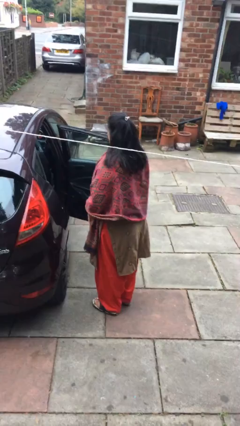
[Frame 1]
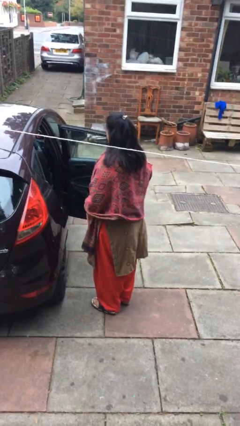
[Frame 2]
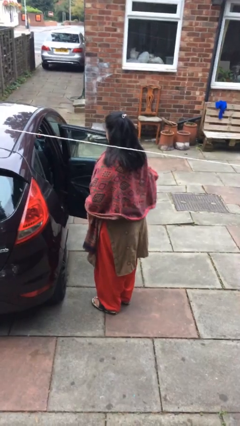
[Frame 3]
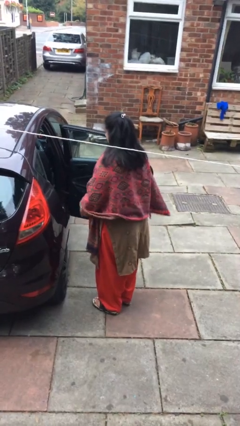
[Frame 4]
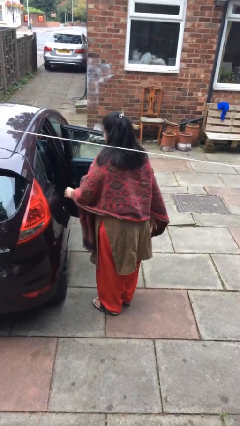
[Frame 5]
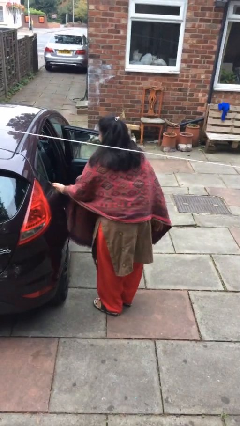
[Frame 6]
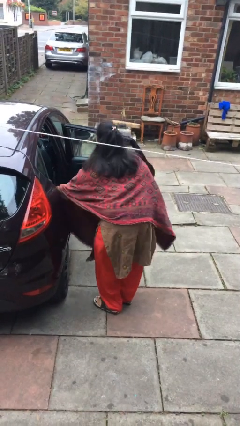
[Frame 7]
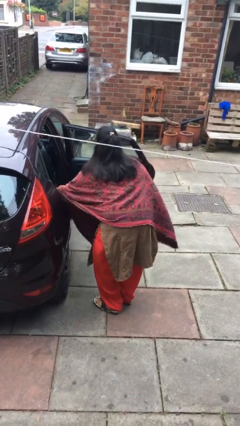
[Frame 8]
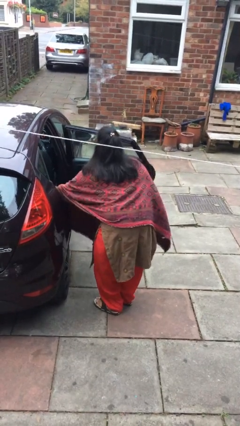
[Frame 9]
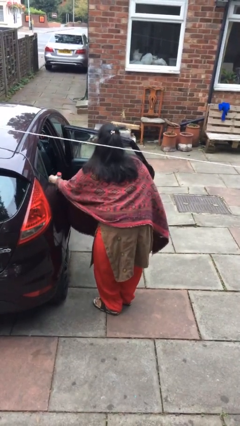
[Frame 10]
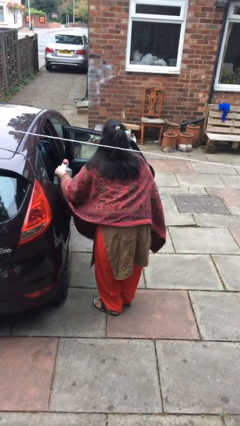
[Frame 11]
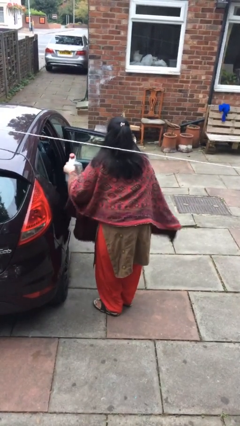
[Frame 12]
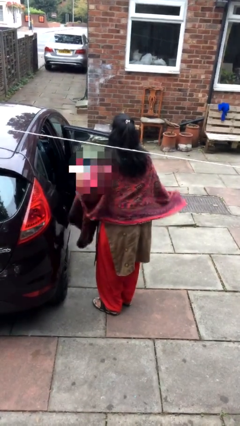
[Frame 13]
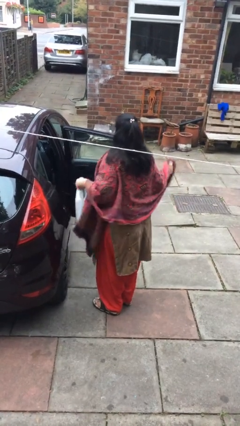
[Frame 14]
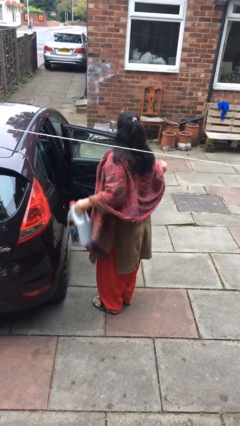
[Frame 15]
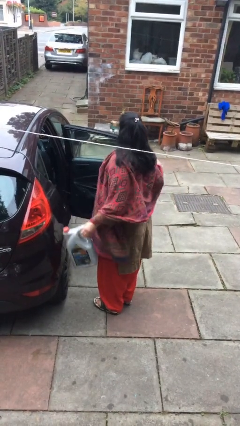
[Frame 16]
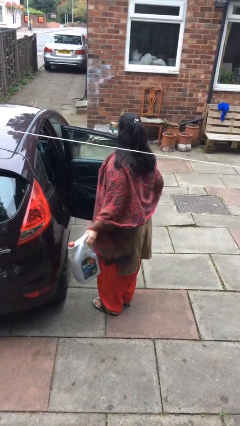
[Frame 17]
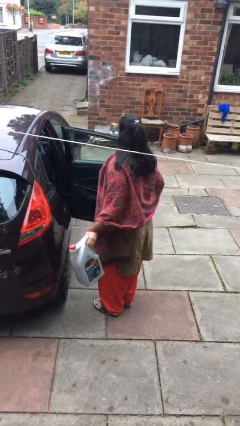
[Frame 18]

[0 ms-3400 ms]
person unloads car

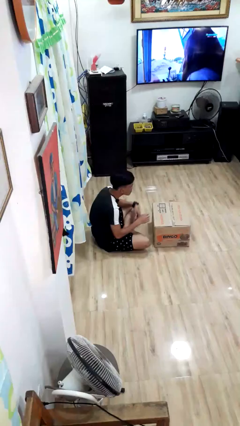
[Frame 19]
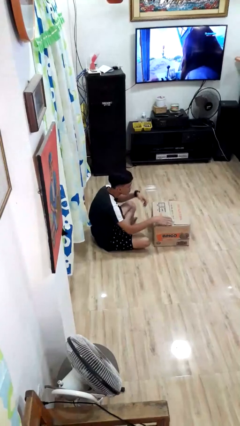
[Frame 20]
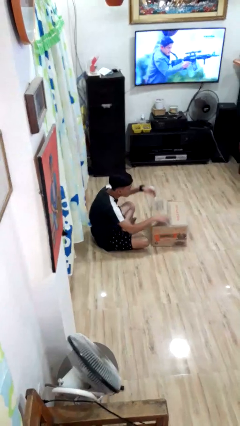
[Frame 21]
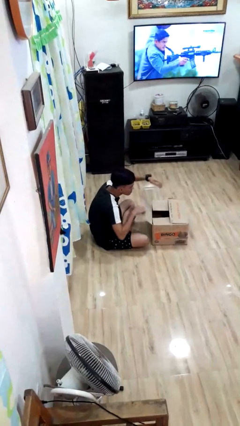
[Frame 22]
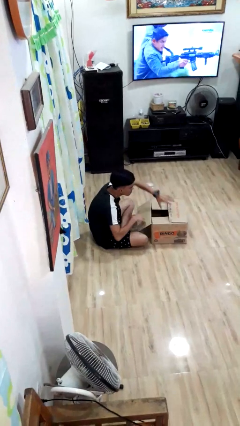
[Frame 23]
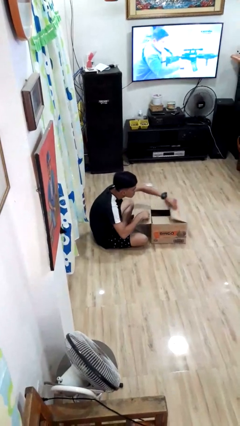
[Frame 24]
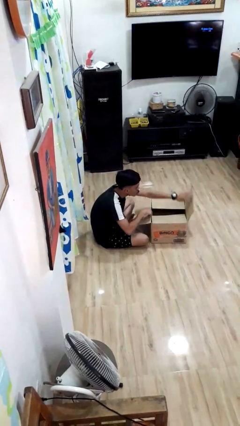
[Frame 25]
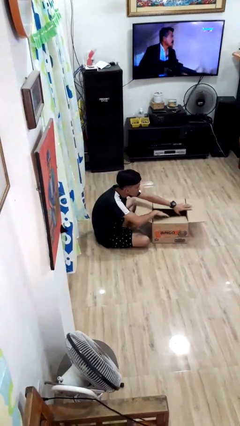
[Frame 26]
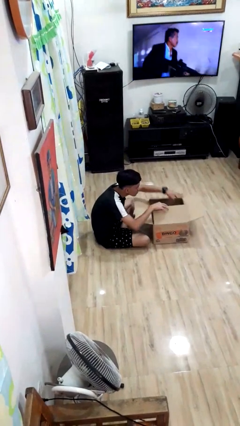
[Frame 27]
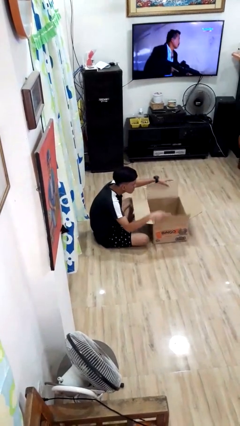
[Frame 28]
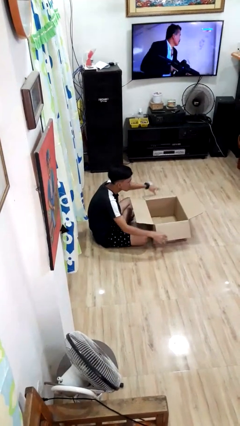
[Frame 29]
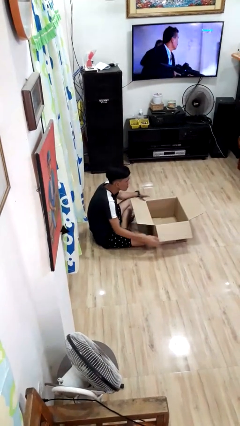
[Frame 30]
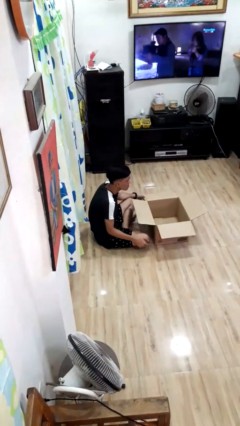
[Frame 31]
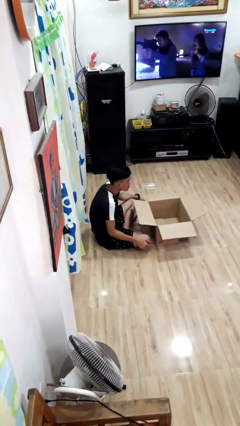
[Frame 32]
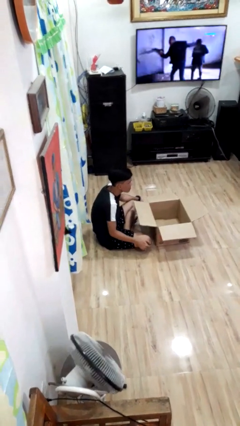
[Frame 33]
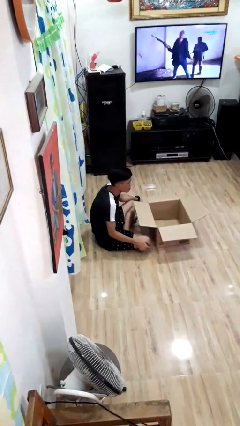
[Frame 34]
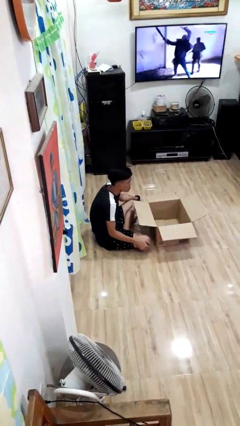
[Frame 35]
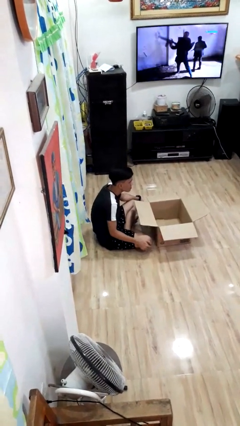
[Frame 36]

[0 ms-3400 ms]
person opens box

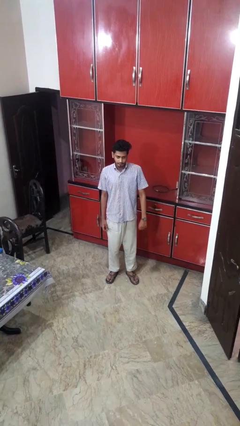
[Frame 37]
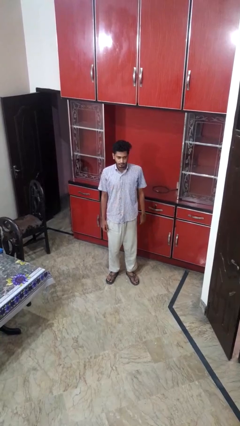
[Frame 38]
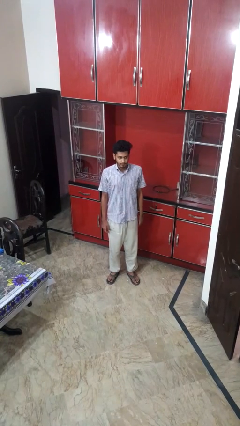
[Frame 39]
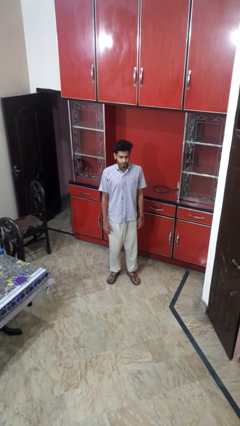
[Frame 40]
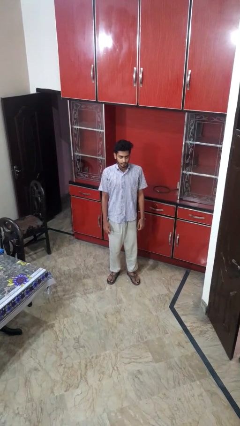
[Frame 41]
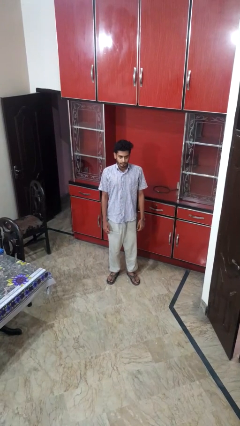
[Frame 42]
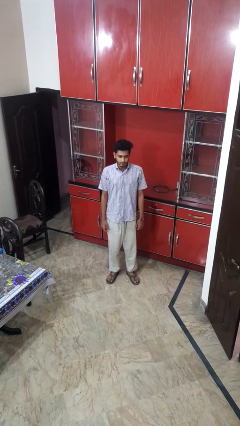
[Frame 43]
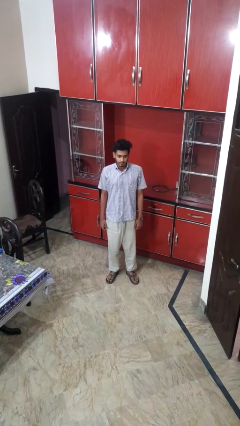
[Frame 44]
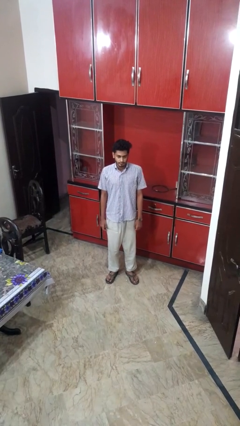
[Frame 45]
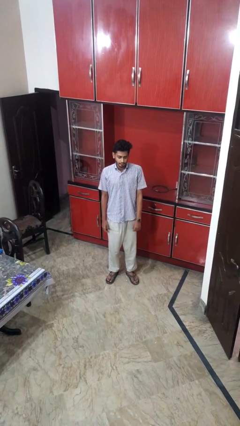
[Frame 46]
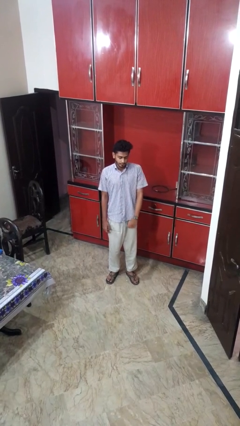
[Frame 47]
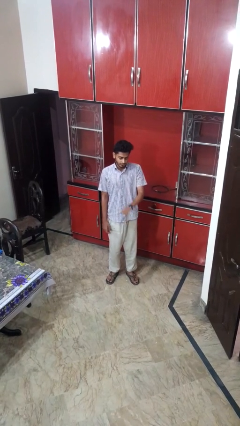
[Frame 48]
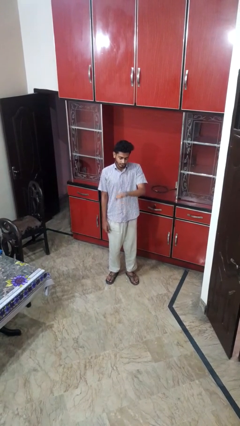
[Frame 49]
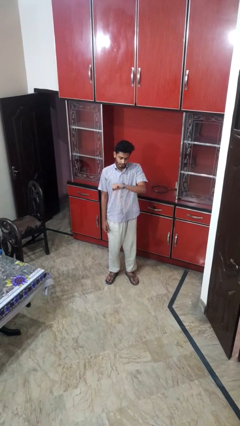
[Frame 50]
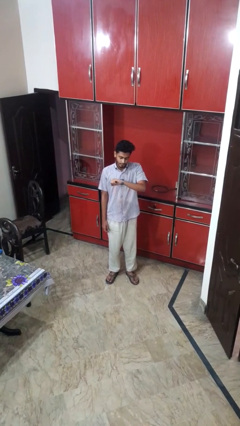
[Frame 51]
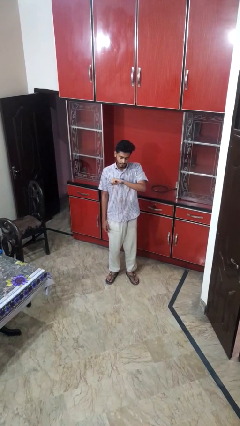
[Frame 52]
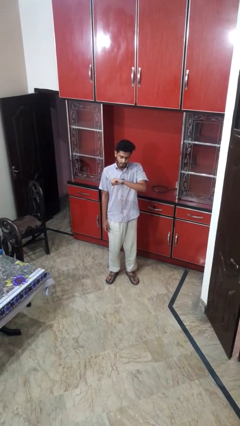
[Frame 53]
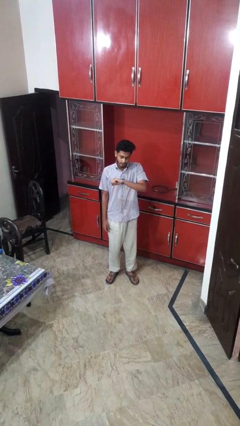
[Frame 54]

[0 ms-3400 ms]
person stands up from floor

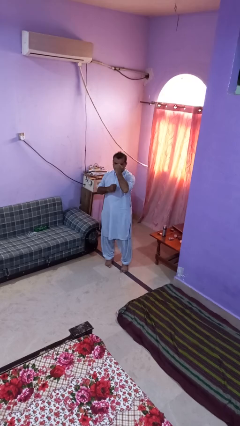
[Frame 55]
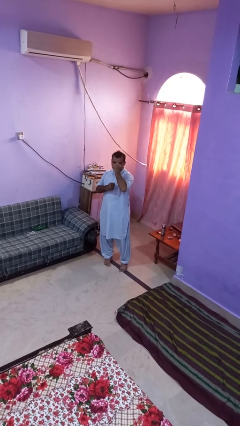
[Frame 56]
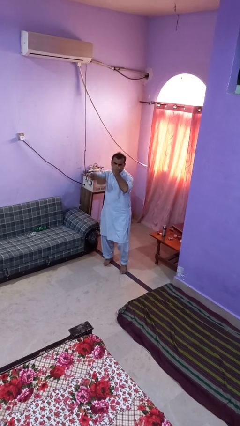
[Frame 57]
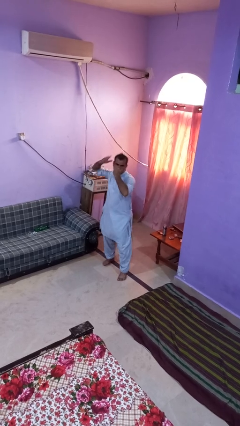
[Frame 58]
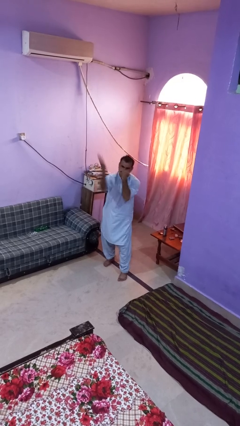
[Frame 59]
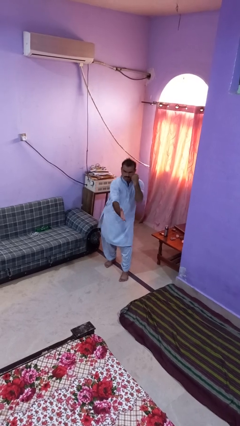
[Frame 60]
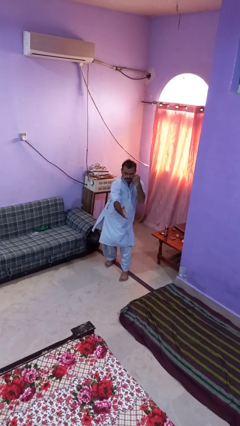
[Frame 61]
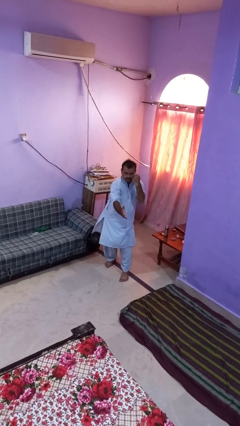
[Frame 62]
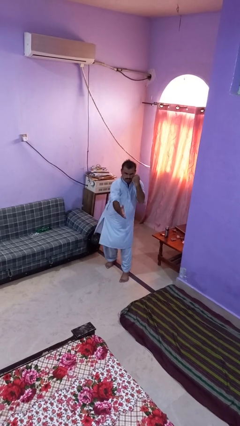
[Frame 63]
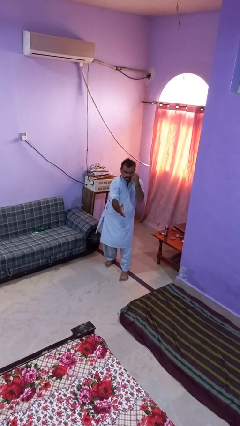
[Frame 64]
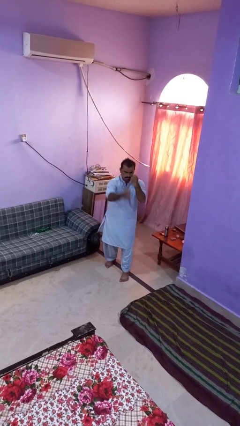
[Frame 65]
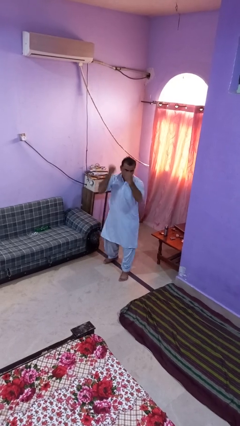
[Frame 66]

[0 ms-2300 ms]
person karate chop

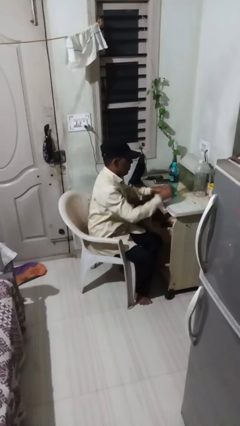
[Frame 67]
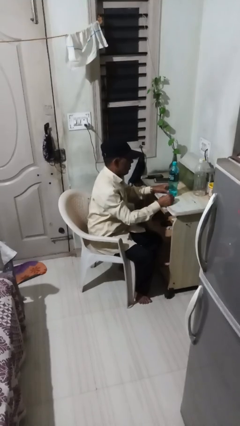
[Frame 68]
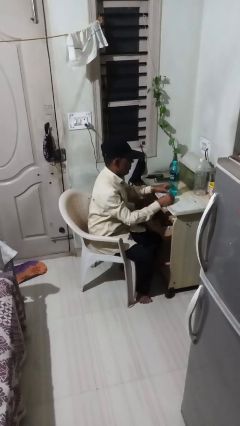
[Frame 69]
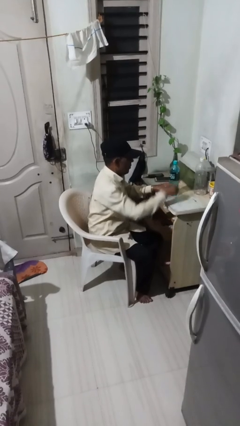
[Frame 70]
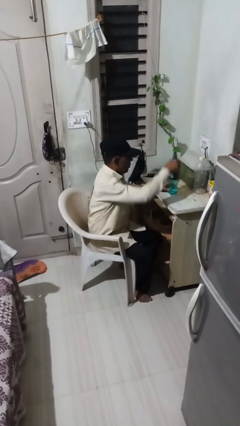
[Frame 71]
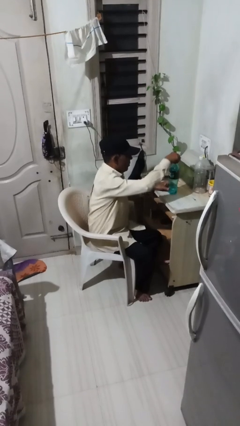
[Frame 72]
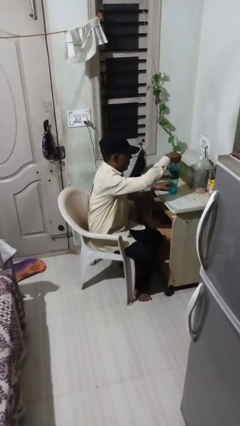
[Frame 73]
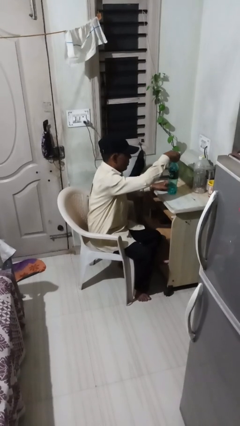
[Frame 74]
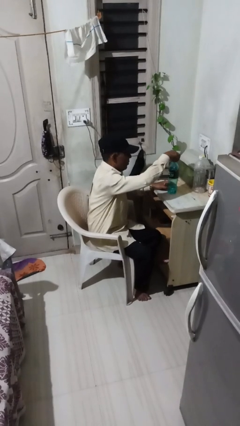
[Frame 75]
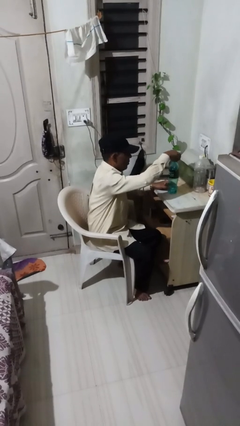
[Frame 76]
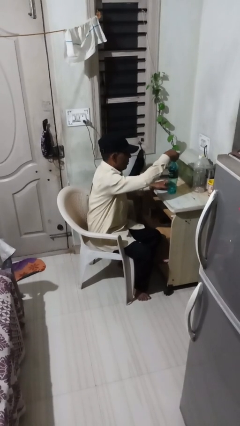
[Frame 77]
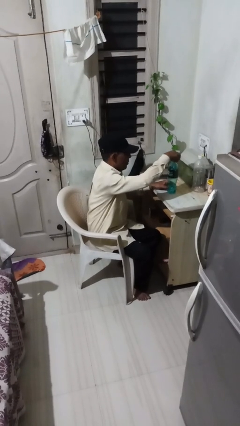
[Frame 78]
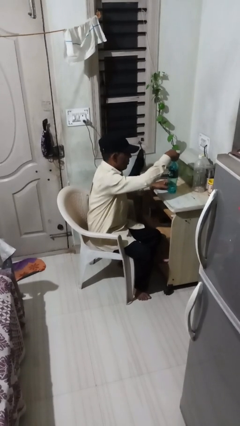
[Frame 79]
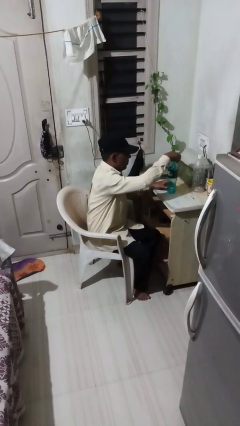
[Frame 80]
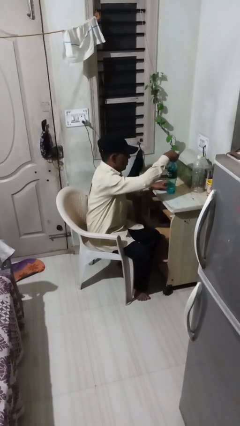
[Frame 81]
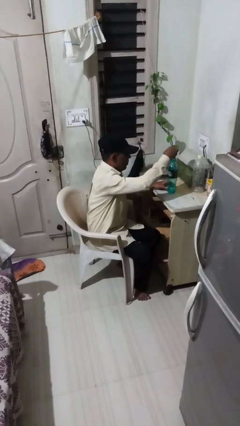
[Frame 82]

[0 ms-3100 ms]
person unscrews lid from bottle

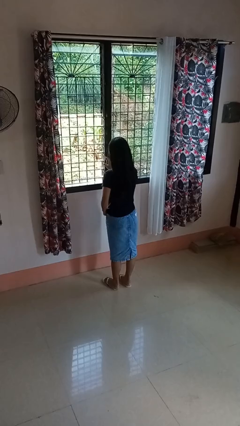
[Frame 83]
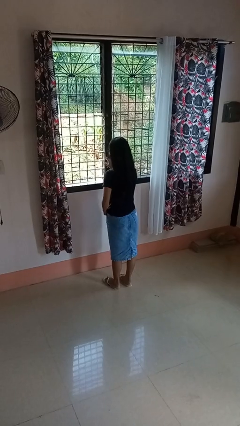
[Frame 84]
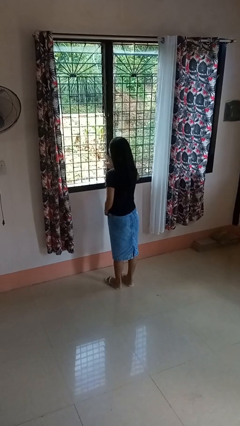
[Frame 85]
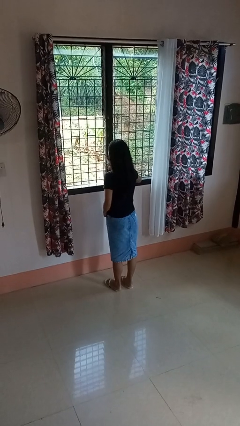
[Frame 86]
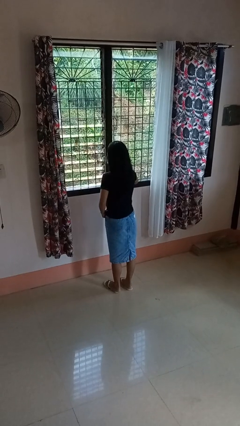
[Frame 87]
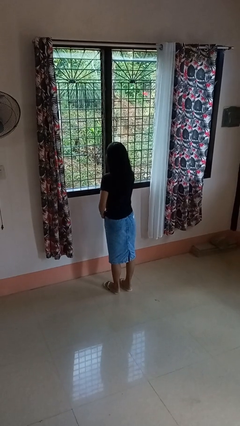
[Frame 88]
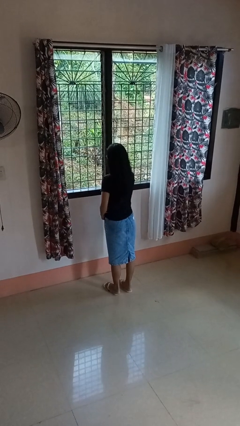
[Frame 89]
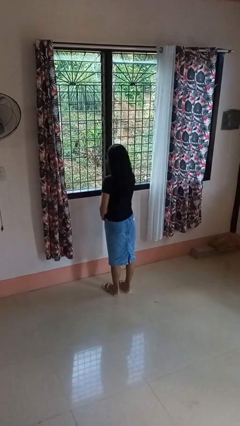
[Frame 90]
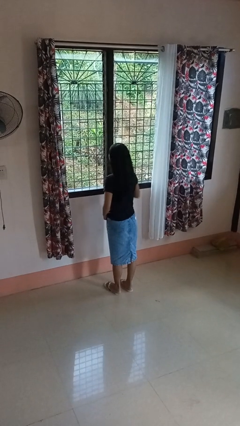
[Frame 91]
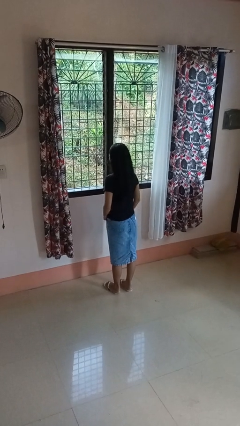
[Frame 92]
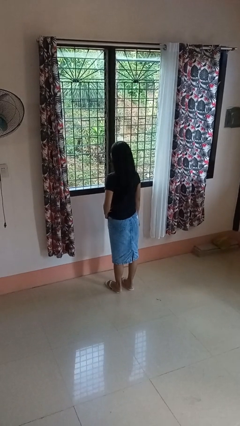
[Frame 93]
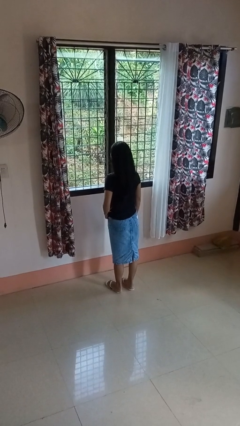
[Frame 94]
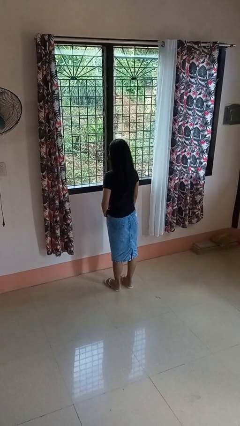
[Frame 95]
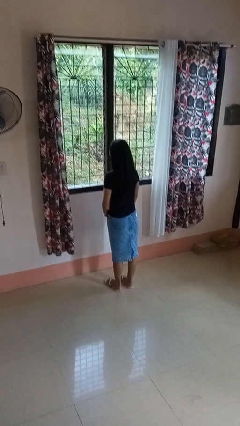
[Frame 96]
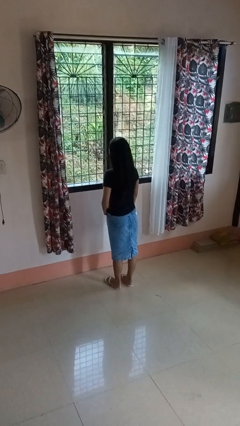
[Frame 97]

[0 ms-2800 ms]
person closes home window
